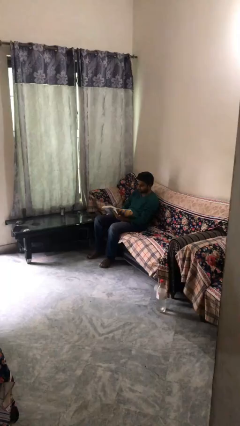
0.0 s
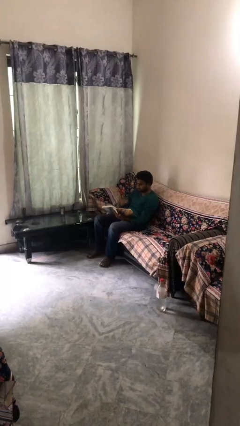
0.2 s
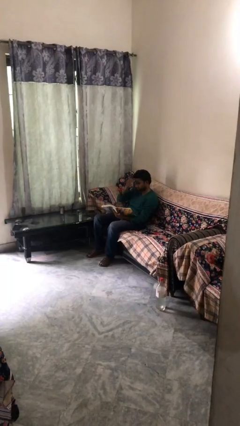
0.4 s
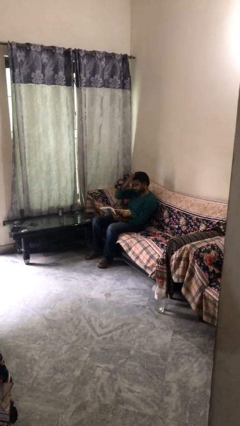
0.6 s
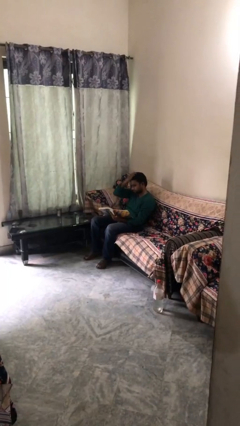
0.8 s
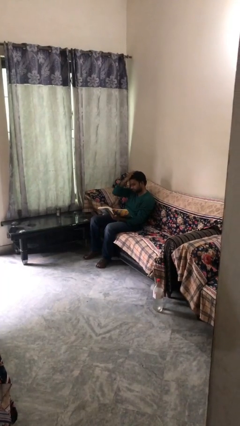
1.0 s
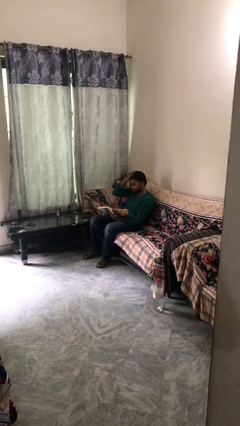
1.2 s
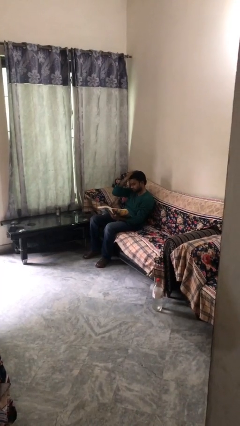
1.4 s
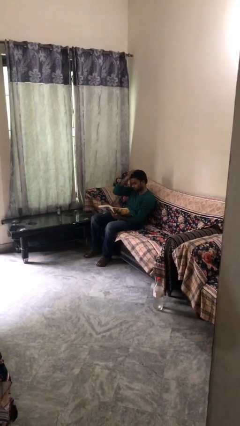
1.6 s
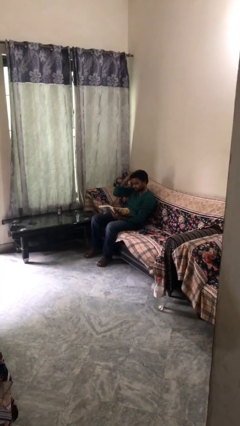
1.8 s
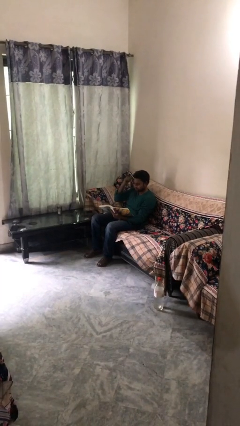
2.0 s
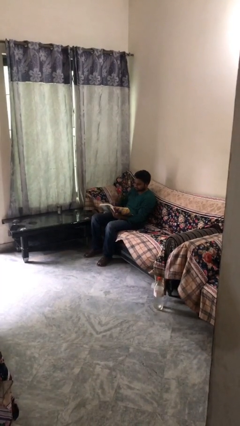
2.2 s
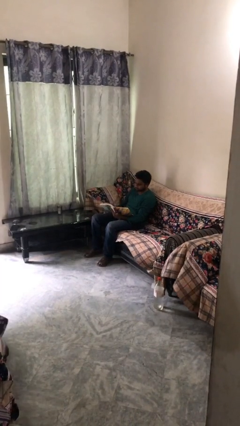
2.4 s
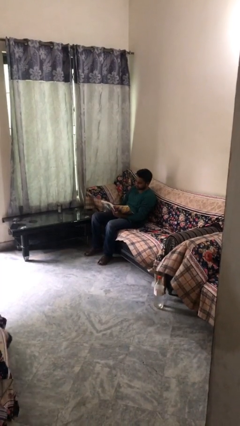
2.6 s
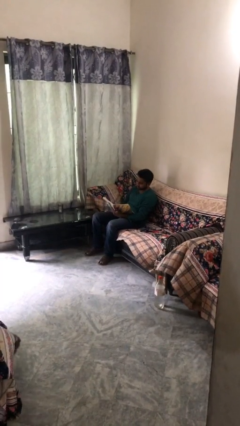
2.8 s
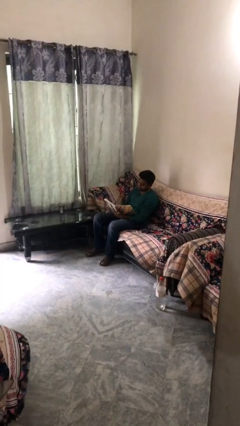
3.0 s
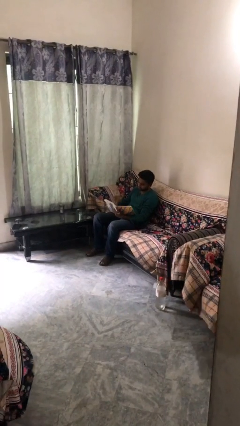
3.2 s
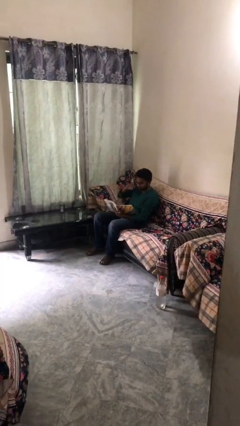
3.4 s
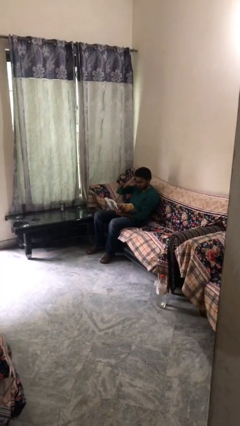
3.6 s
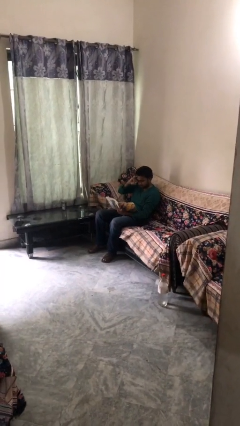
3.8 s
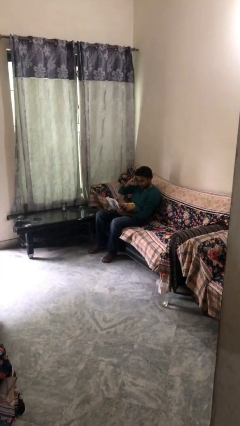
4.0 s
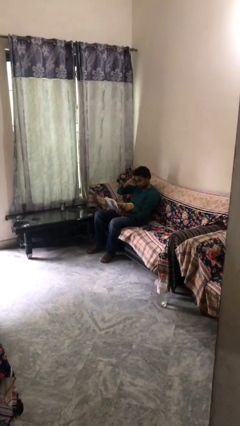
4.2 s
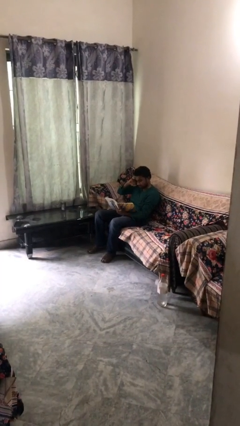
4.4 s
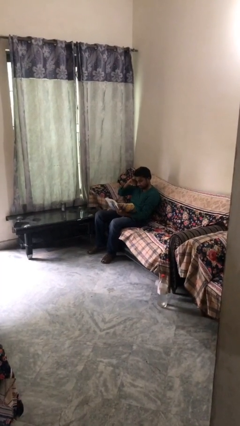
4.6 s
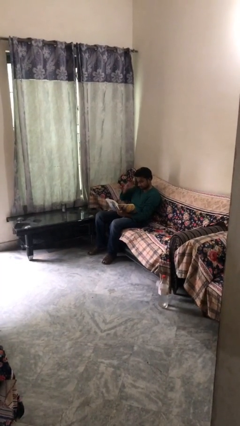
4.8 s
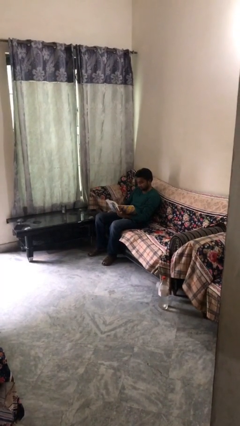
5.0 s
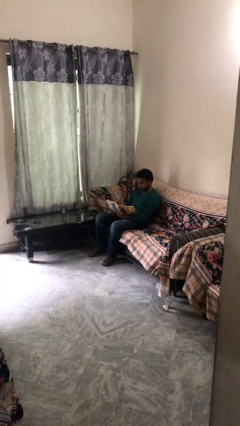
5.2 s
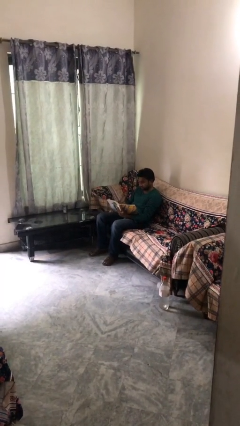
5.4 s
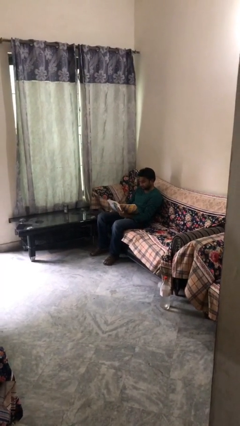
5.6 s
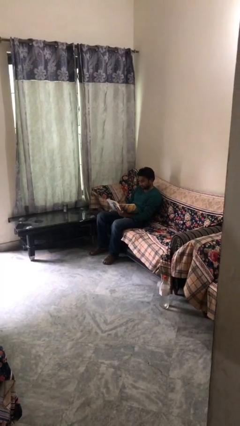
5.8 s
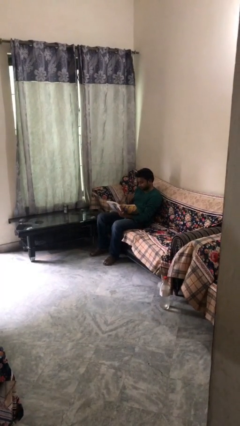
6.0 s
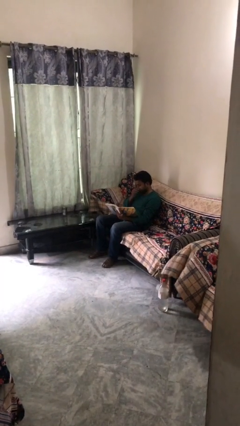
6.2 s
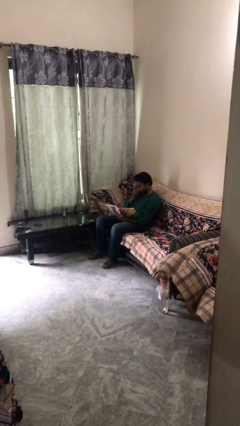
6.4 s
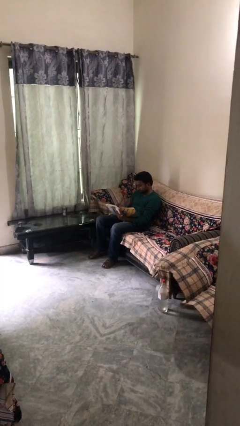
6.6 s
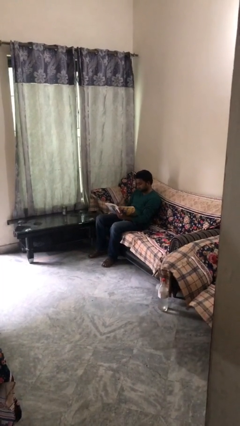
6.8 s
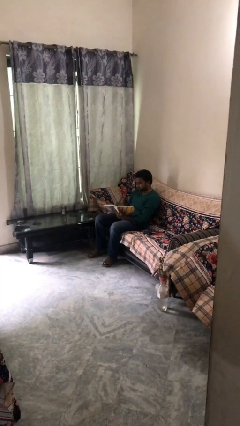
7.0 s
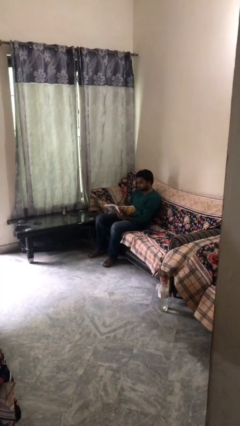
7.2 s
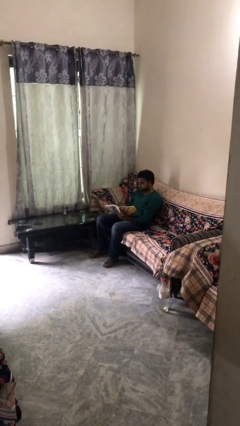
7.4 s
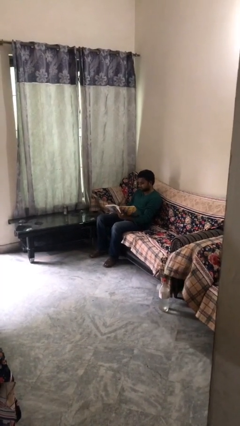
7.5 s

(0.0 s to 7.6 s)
person reads document

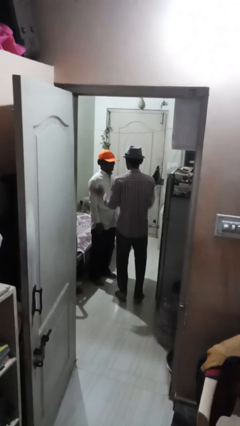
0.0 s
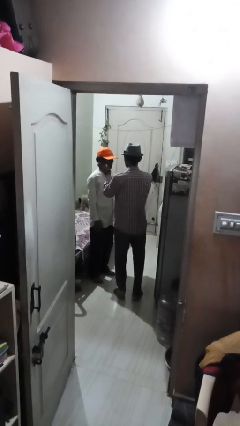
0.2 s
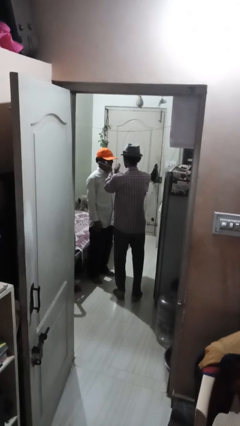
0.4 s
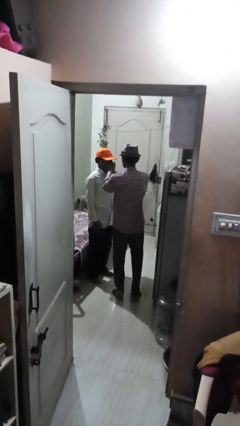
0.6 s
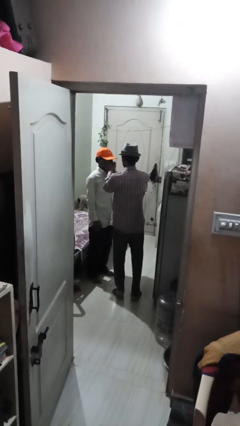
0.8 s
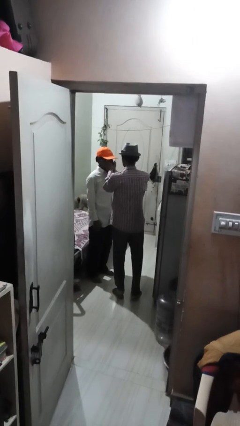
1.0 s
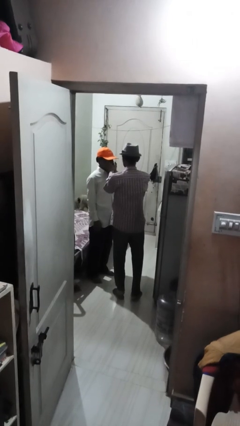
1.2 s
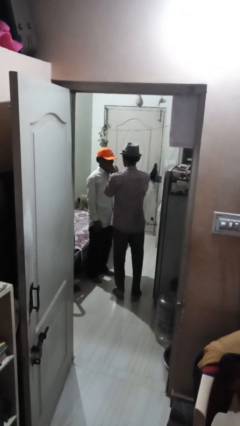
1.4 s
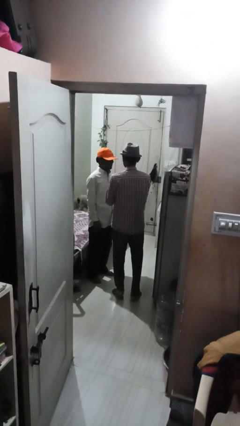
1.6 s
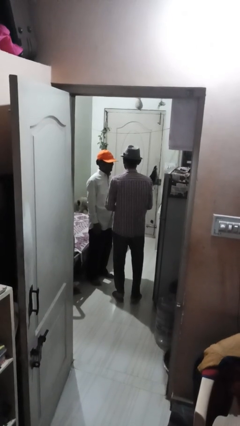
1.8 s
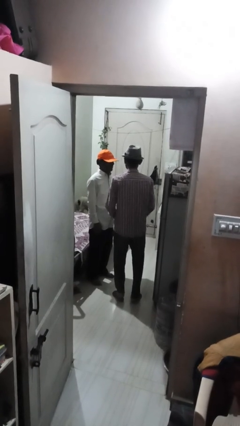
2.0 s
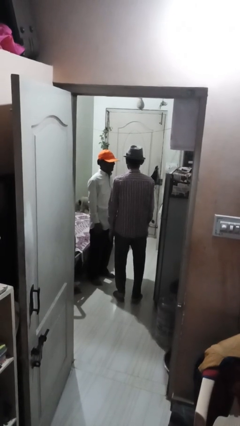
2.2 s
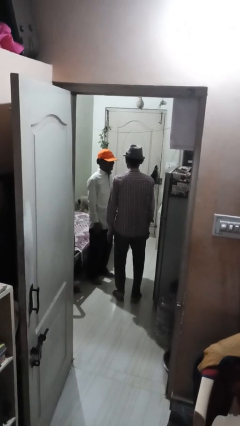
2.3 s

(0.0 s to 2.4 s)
person touches face of person
